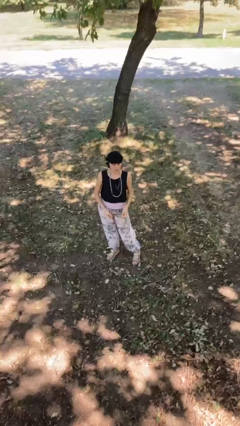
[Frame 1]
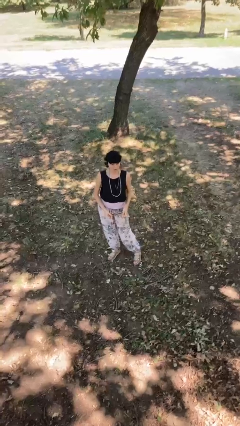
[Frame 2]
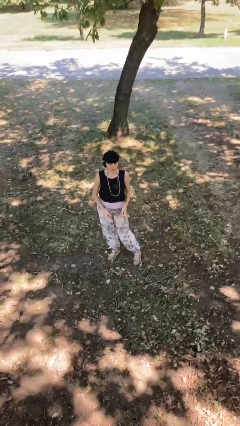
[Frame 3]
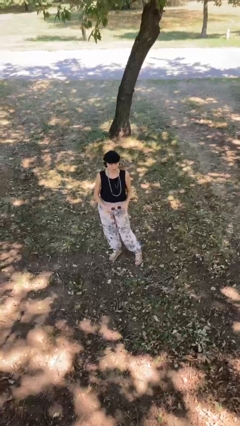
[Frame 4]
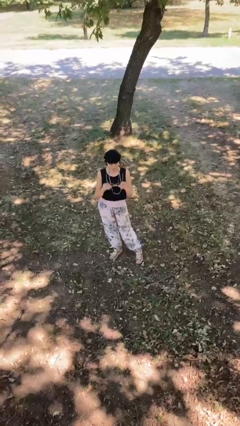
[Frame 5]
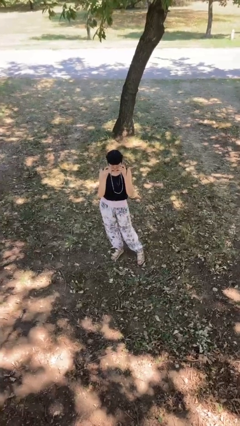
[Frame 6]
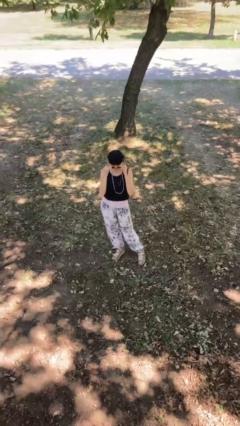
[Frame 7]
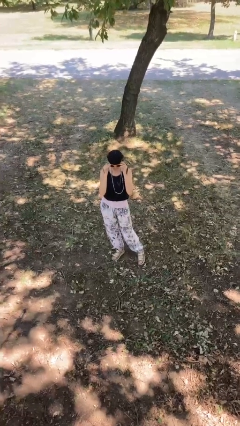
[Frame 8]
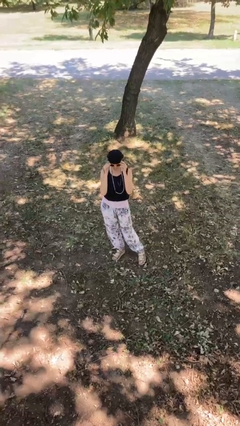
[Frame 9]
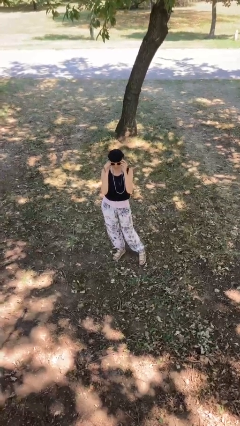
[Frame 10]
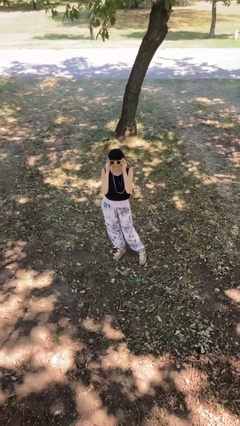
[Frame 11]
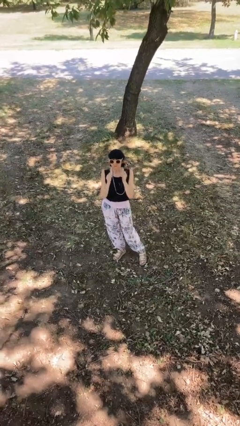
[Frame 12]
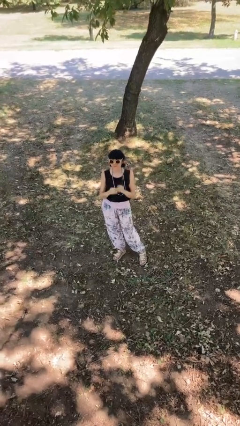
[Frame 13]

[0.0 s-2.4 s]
person puts on sunglasses

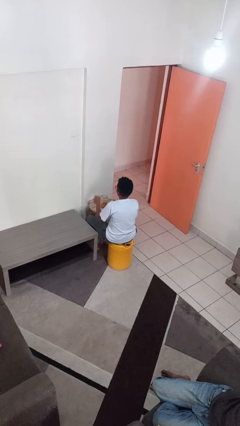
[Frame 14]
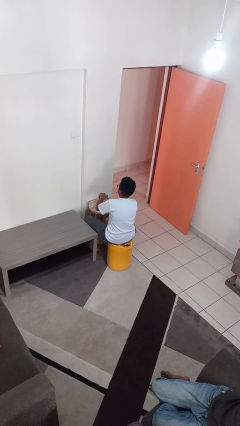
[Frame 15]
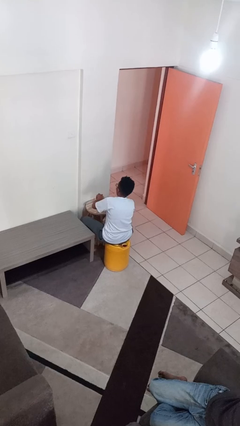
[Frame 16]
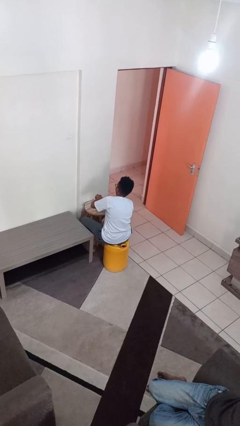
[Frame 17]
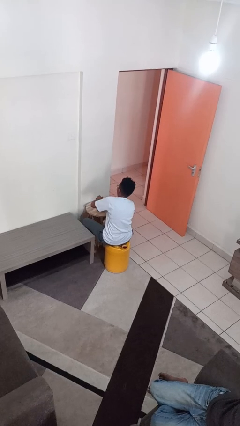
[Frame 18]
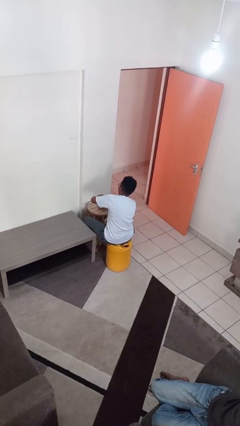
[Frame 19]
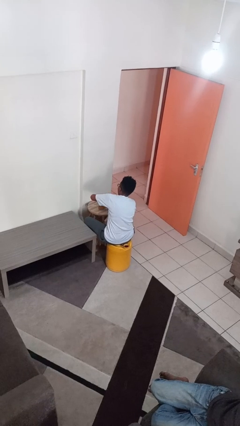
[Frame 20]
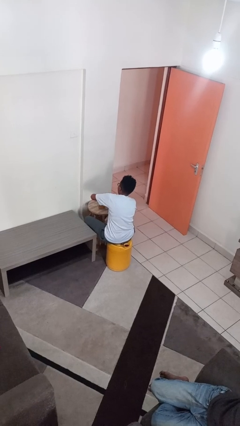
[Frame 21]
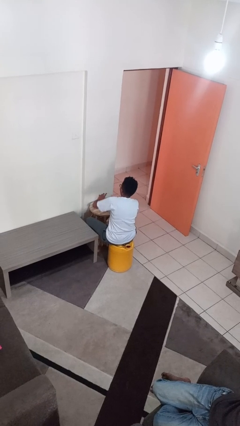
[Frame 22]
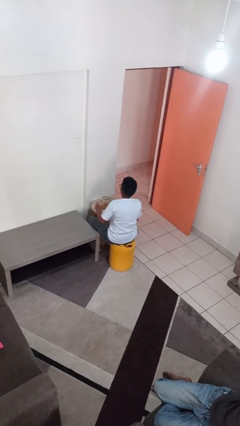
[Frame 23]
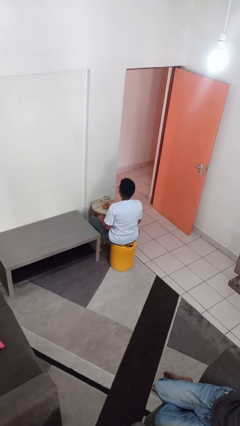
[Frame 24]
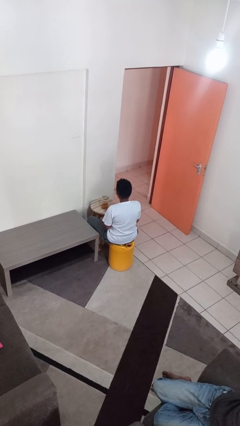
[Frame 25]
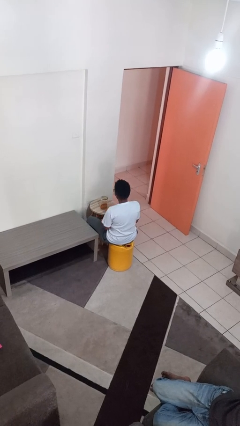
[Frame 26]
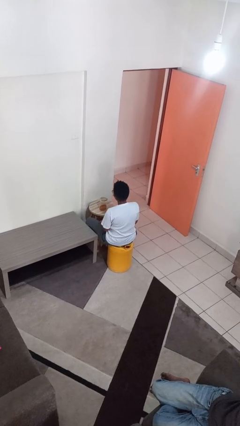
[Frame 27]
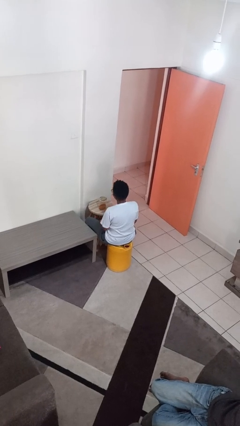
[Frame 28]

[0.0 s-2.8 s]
person closes jar

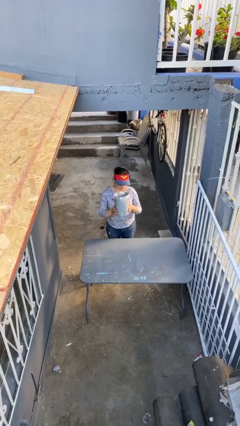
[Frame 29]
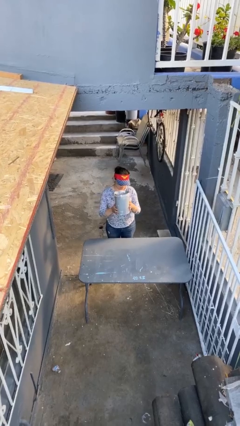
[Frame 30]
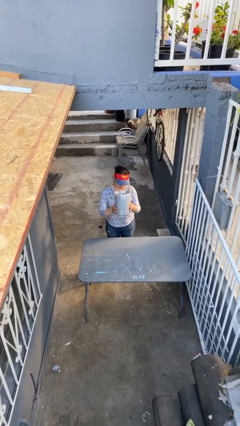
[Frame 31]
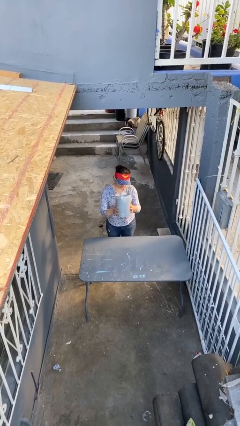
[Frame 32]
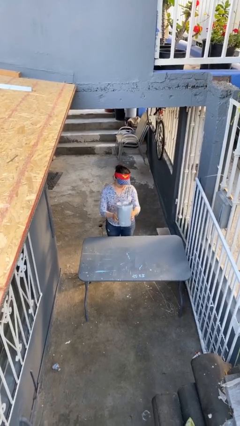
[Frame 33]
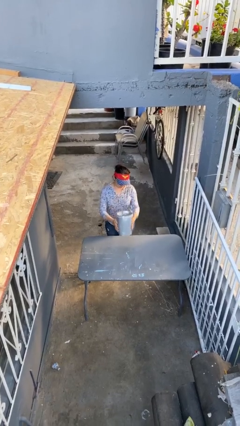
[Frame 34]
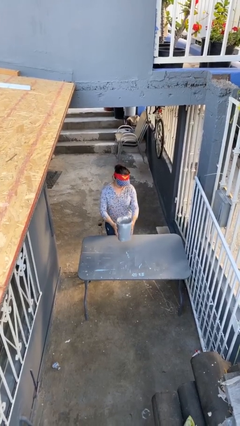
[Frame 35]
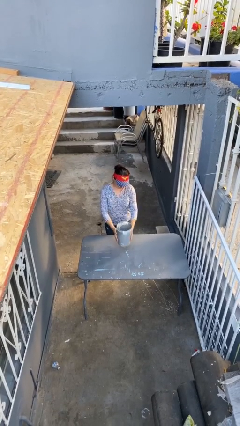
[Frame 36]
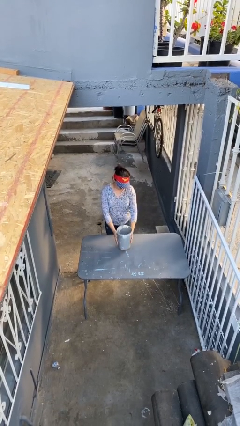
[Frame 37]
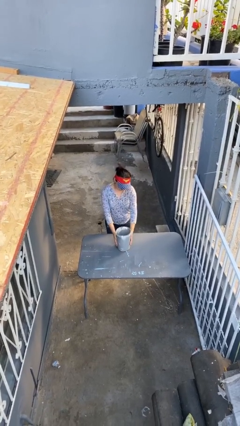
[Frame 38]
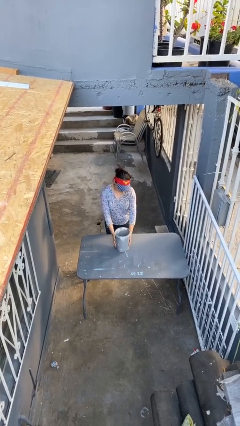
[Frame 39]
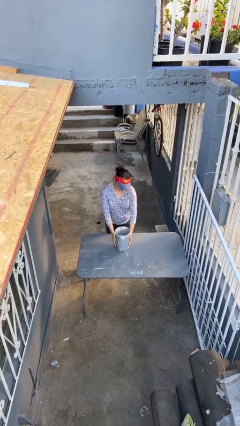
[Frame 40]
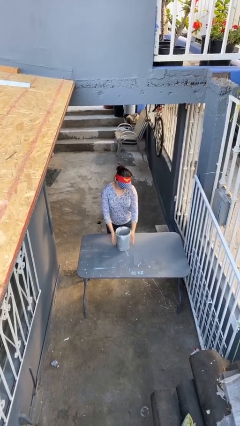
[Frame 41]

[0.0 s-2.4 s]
person puts down object on table

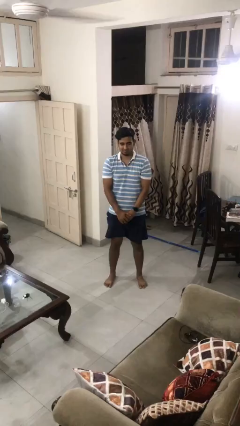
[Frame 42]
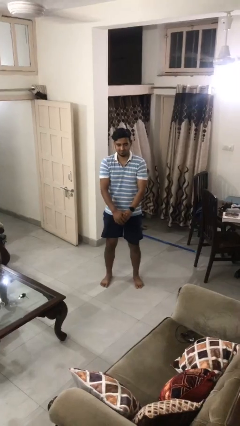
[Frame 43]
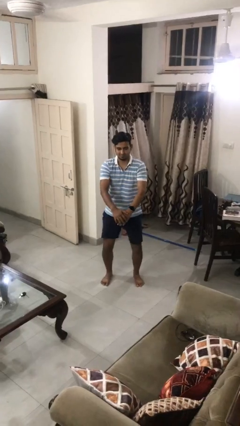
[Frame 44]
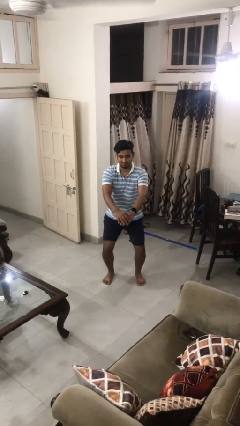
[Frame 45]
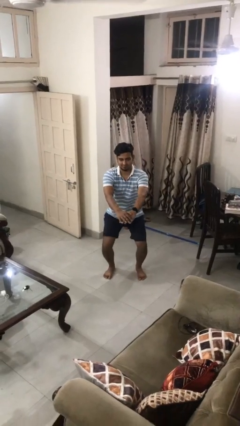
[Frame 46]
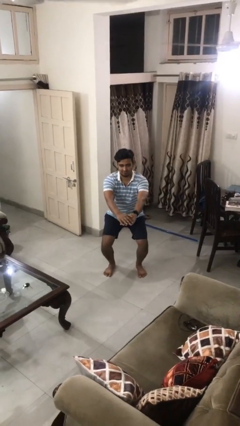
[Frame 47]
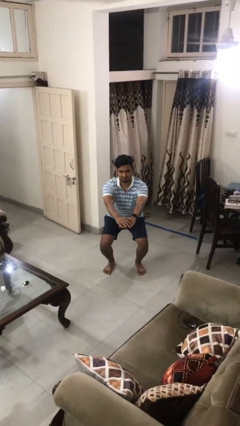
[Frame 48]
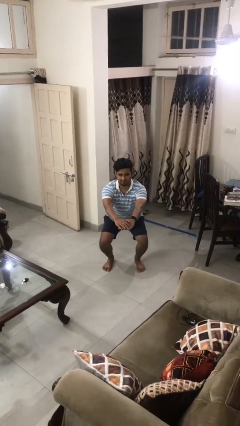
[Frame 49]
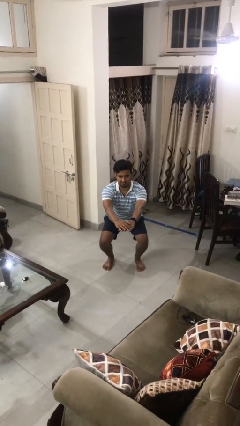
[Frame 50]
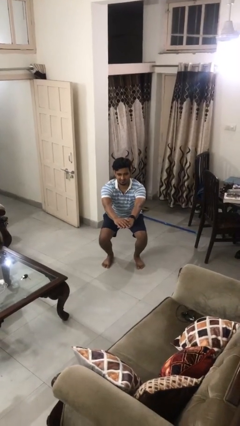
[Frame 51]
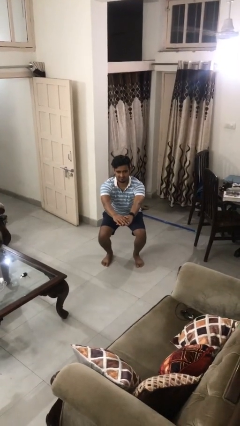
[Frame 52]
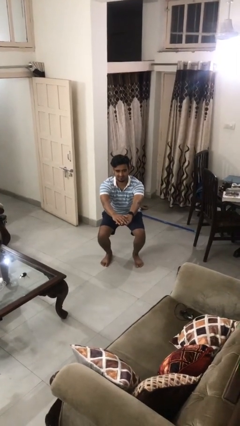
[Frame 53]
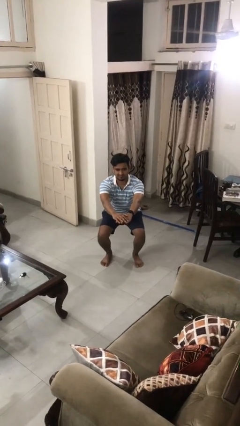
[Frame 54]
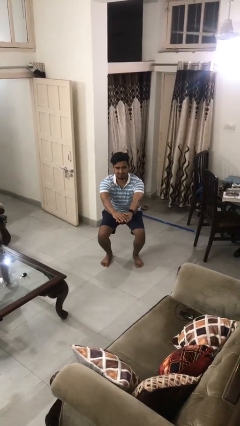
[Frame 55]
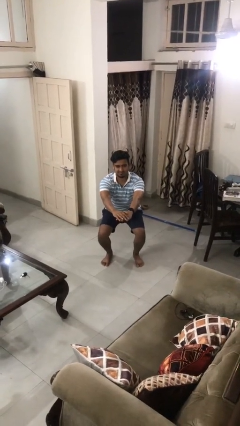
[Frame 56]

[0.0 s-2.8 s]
person squats

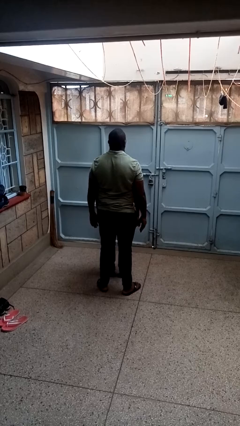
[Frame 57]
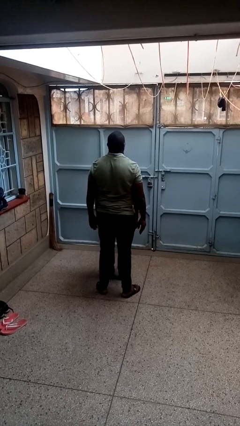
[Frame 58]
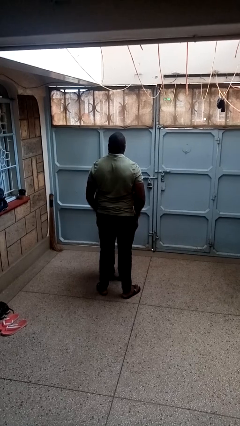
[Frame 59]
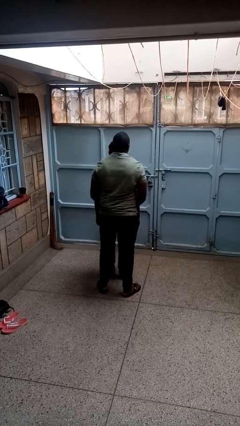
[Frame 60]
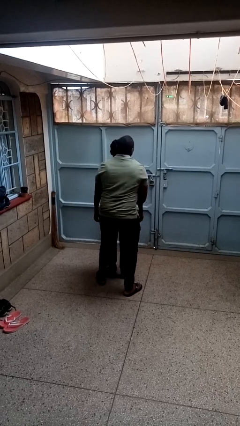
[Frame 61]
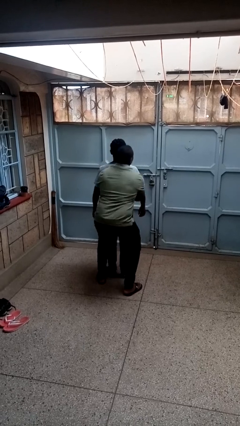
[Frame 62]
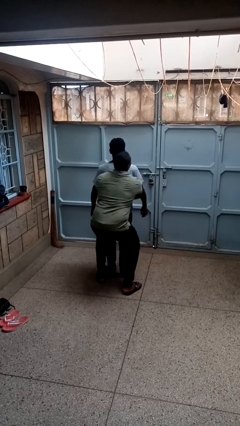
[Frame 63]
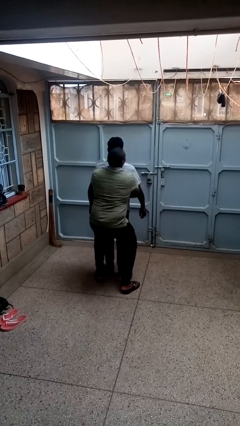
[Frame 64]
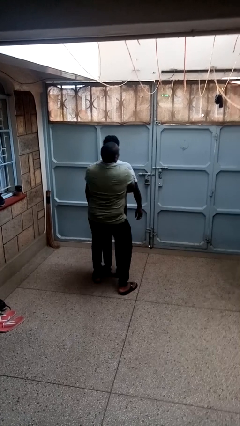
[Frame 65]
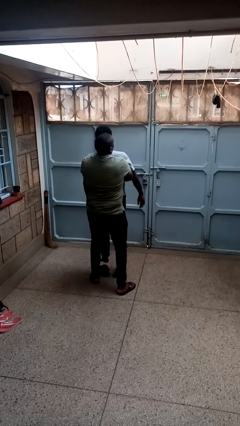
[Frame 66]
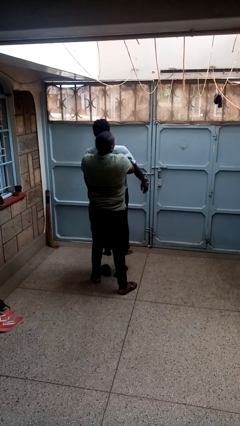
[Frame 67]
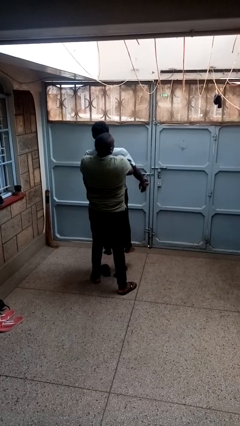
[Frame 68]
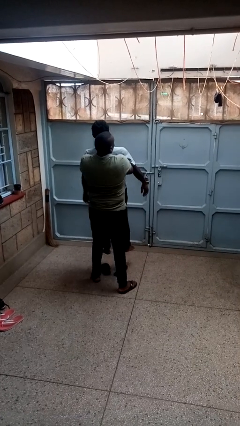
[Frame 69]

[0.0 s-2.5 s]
person puts down person

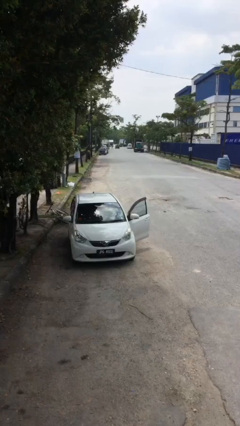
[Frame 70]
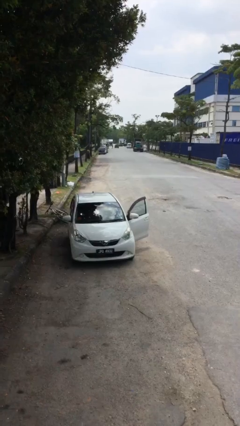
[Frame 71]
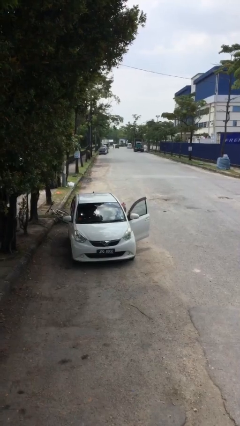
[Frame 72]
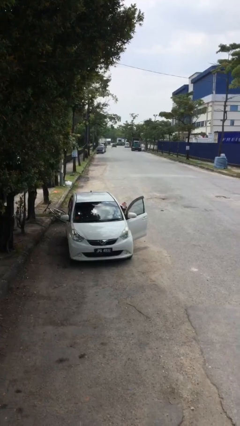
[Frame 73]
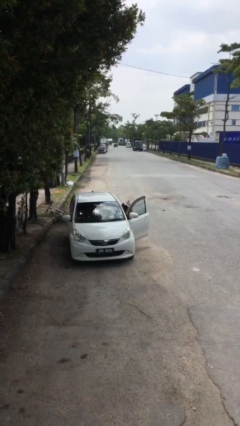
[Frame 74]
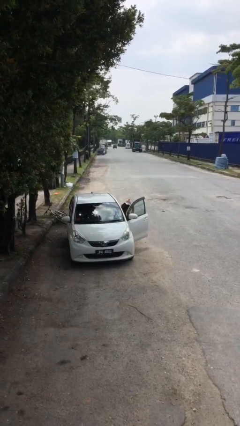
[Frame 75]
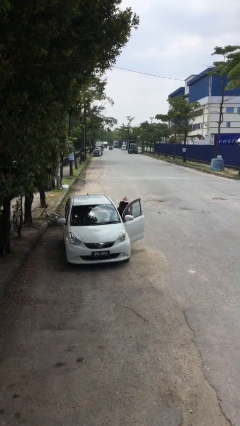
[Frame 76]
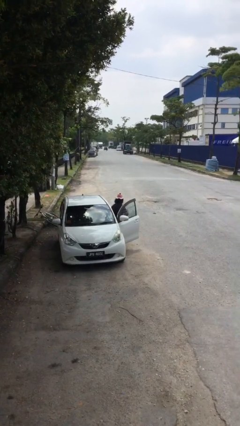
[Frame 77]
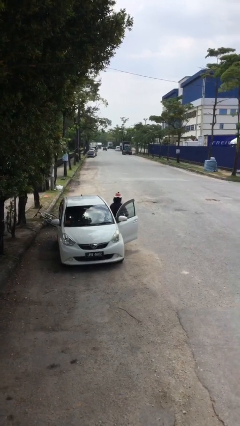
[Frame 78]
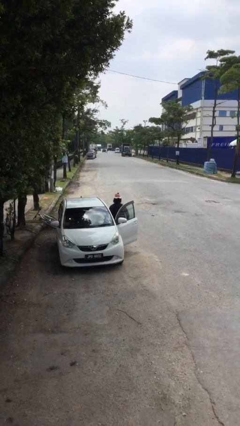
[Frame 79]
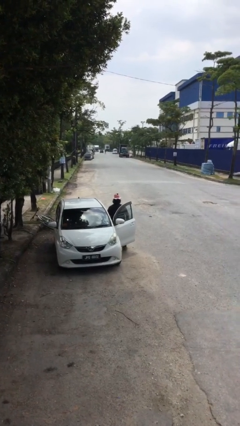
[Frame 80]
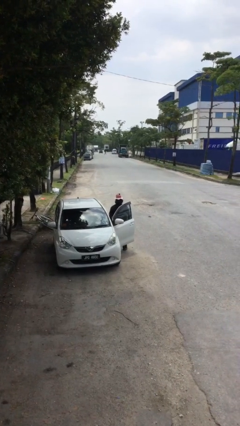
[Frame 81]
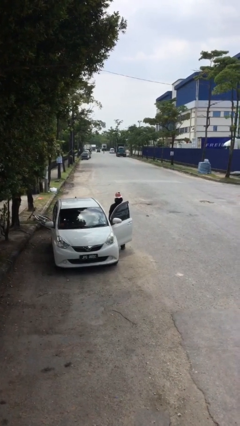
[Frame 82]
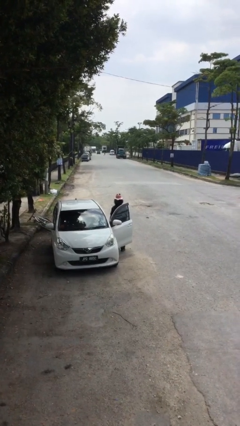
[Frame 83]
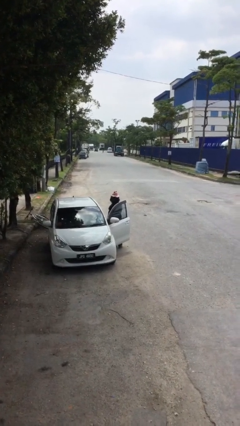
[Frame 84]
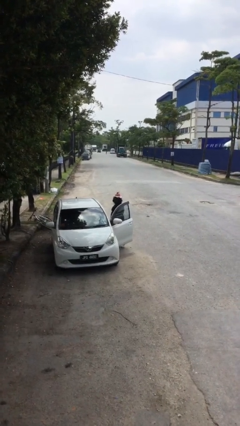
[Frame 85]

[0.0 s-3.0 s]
person exits car

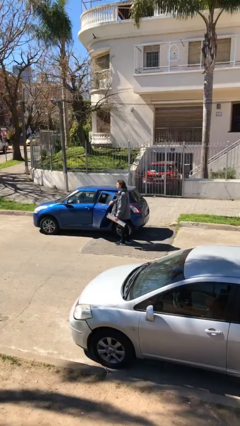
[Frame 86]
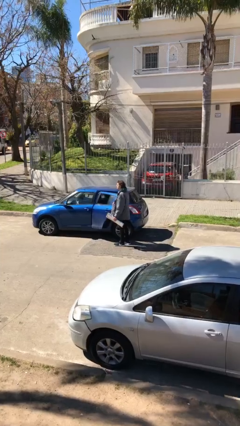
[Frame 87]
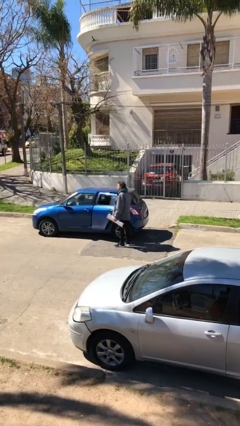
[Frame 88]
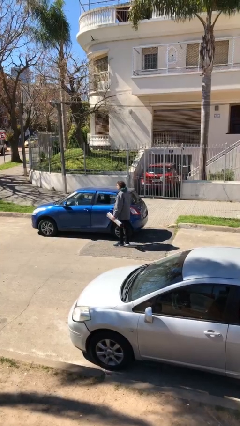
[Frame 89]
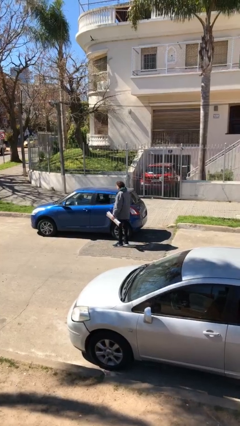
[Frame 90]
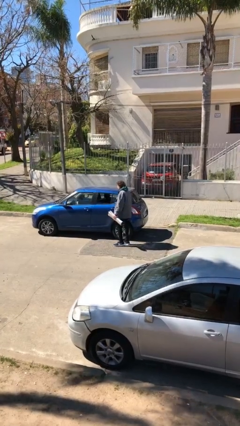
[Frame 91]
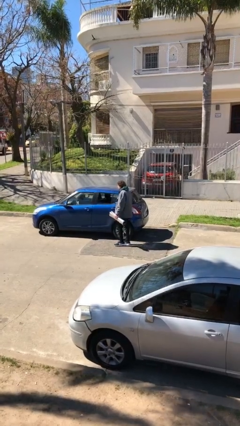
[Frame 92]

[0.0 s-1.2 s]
person closes car door

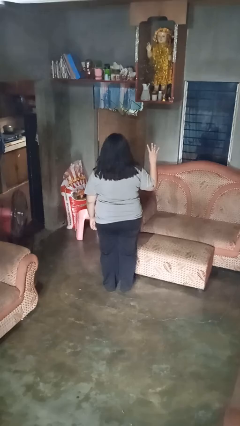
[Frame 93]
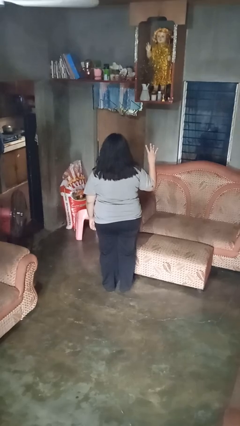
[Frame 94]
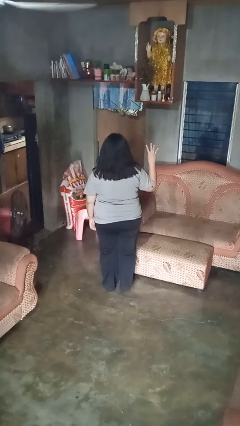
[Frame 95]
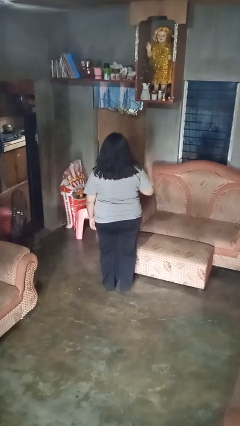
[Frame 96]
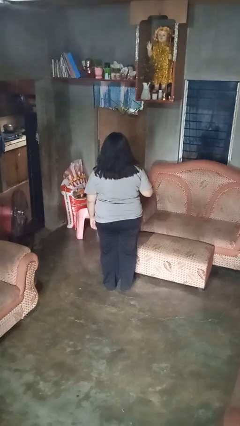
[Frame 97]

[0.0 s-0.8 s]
person gestures number four
